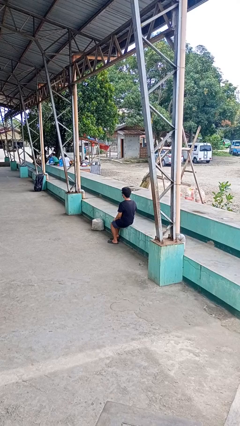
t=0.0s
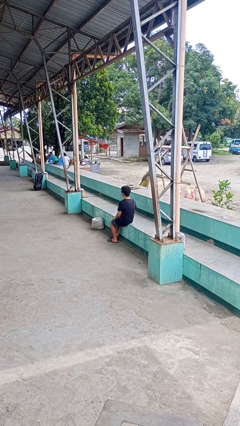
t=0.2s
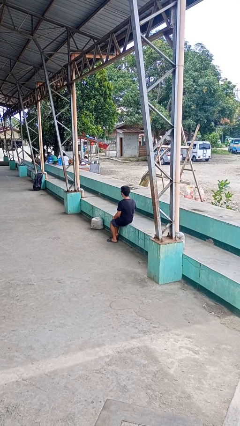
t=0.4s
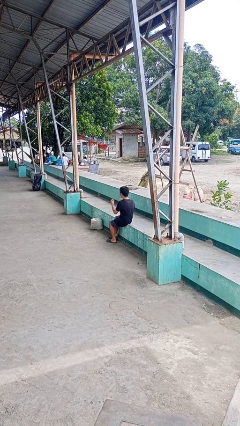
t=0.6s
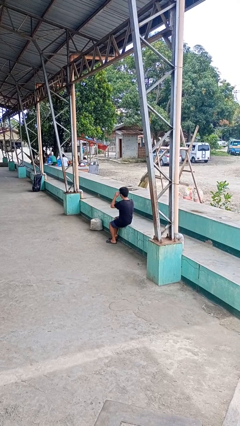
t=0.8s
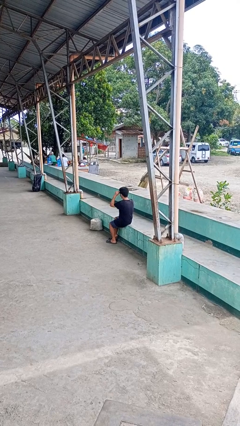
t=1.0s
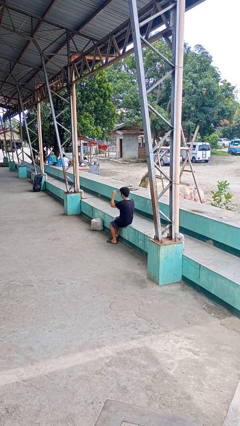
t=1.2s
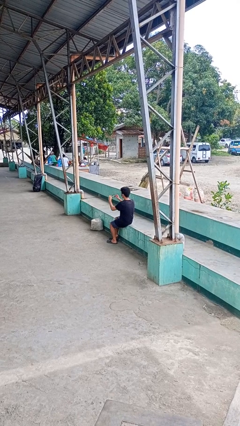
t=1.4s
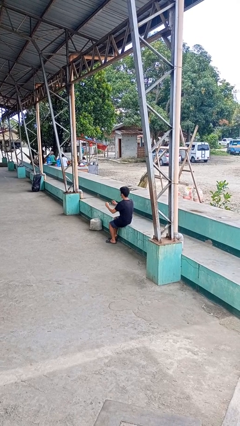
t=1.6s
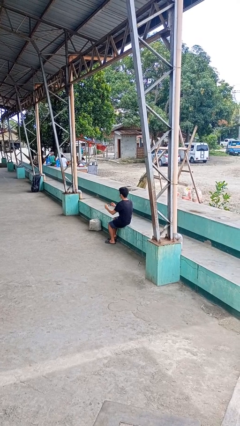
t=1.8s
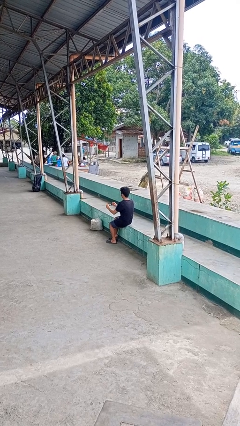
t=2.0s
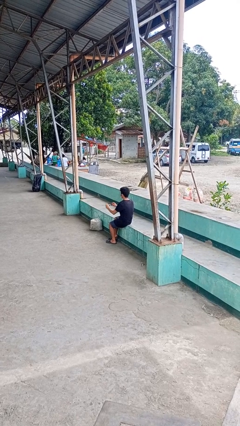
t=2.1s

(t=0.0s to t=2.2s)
person takes off sunglasses

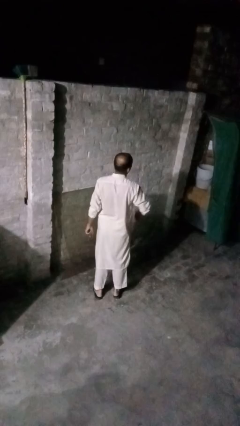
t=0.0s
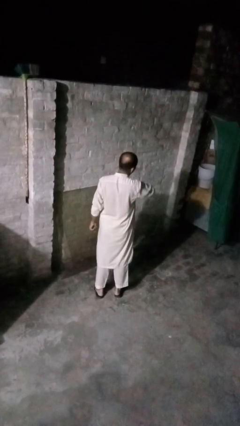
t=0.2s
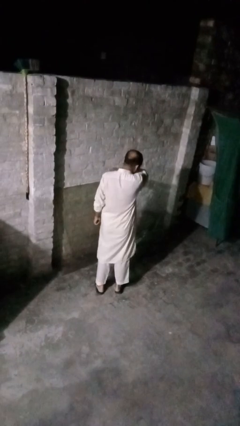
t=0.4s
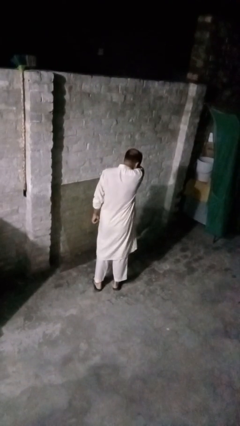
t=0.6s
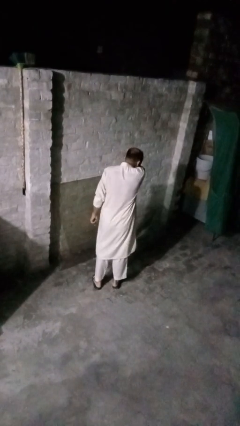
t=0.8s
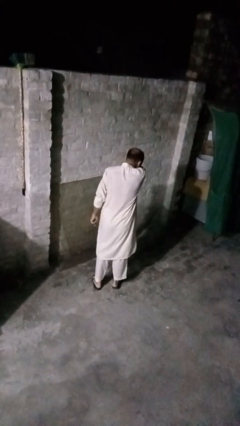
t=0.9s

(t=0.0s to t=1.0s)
person sneezes into arm

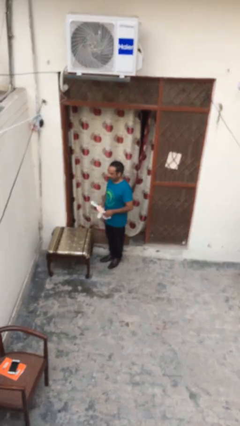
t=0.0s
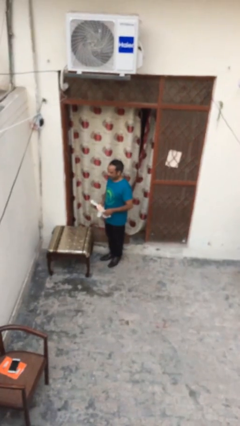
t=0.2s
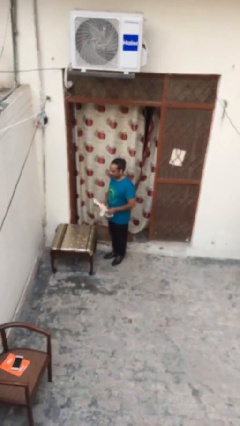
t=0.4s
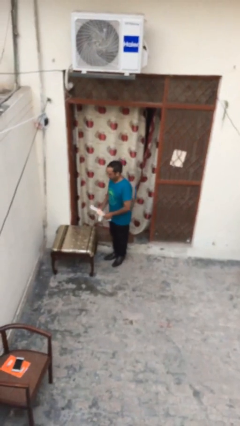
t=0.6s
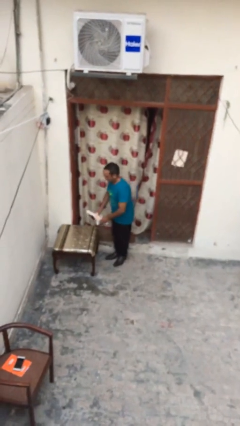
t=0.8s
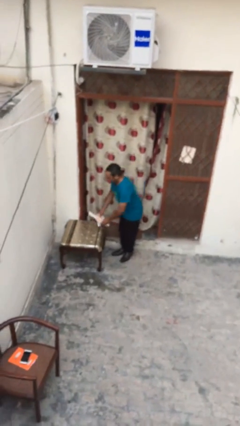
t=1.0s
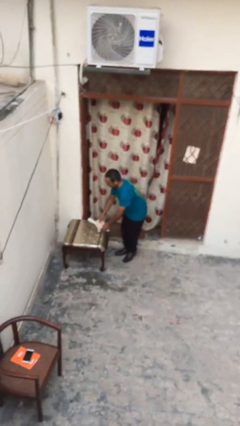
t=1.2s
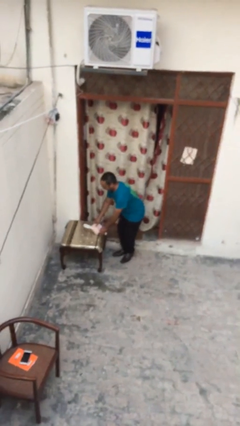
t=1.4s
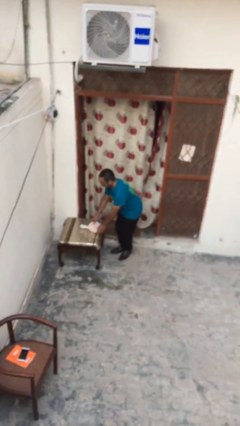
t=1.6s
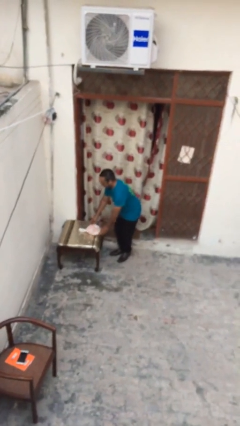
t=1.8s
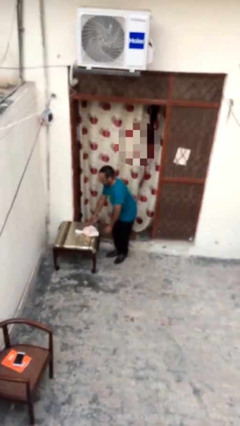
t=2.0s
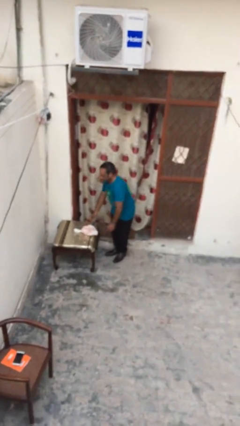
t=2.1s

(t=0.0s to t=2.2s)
person puts down object on table

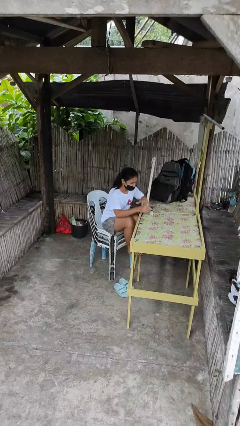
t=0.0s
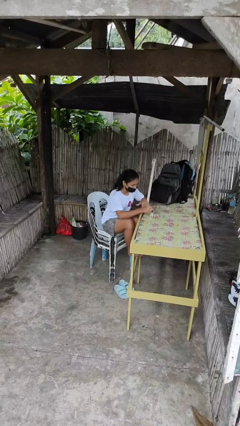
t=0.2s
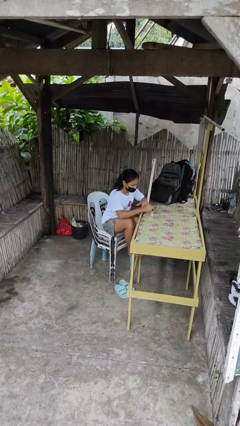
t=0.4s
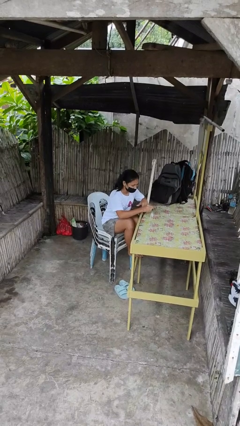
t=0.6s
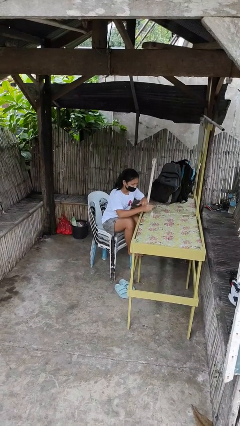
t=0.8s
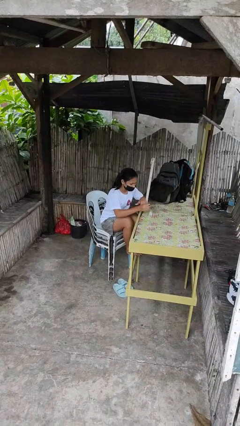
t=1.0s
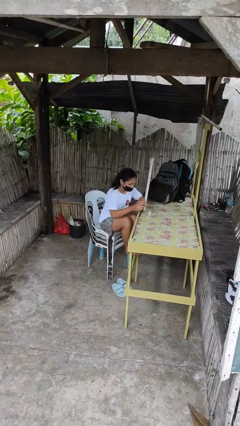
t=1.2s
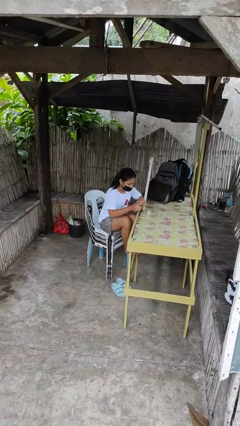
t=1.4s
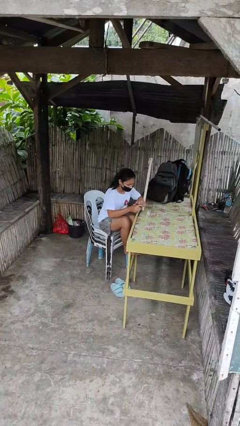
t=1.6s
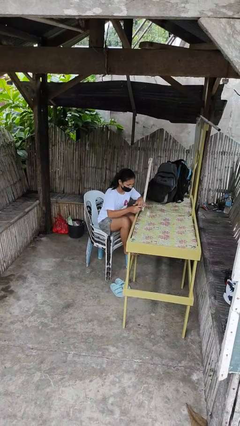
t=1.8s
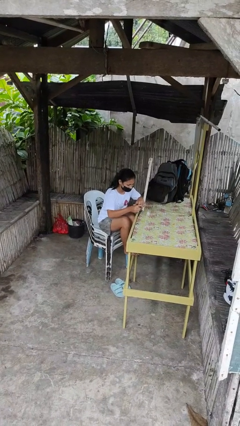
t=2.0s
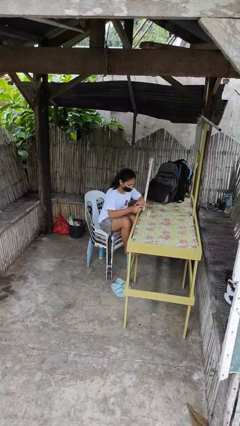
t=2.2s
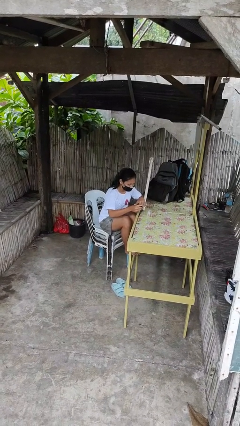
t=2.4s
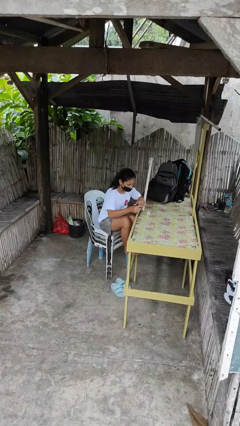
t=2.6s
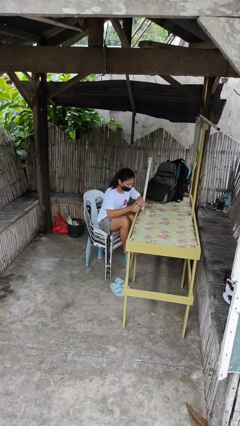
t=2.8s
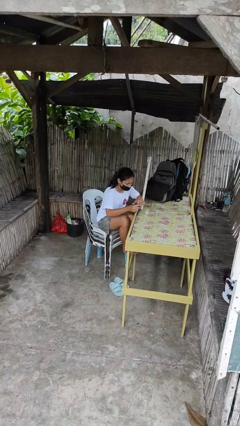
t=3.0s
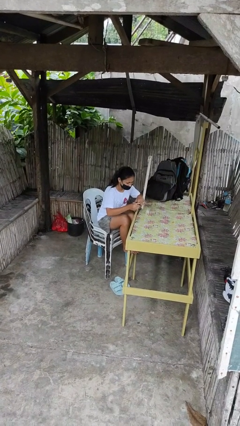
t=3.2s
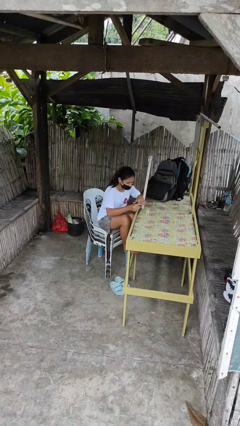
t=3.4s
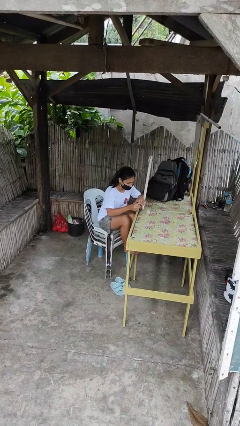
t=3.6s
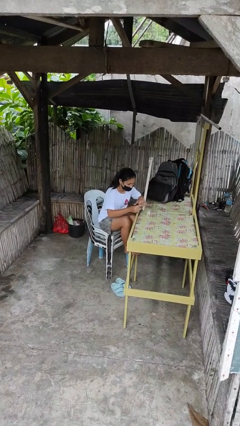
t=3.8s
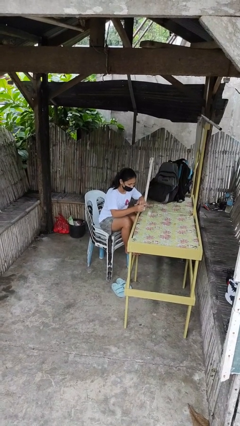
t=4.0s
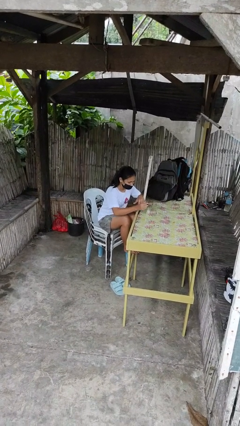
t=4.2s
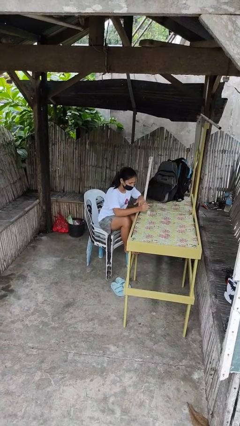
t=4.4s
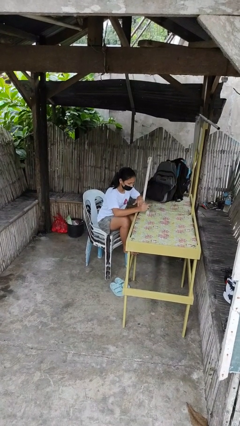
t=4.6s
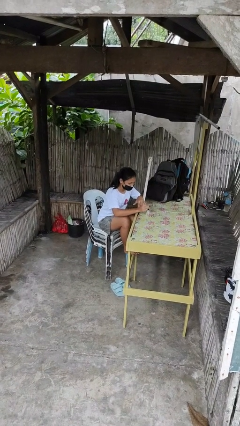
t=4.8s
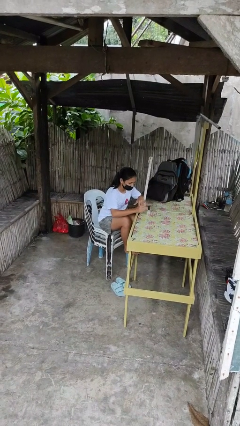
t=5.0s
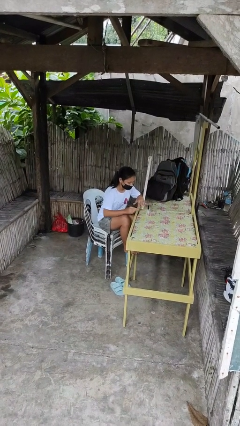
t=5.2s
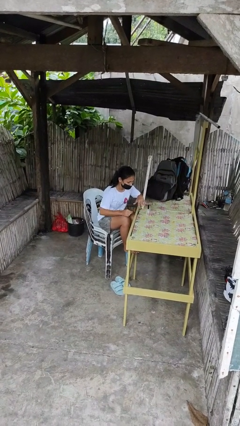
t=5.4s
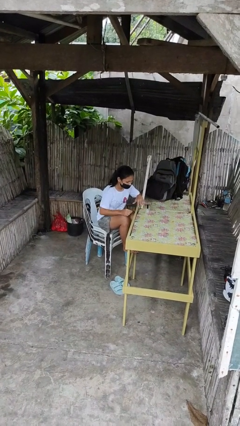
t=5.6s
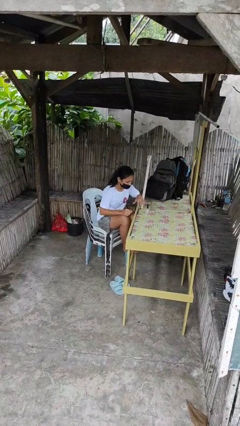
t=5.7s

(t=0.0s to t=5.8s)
person paints fingernails

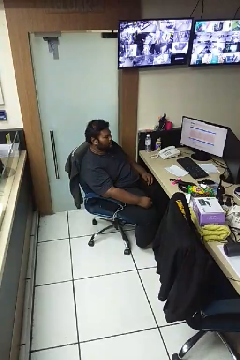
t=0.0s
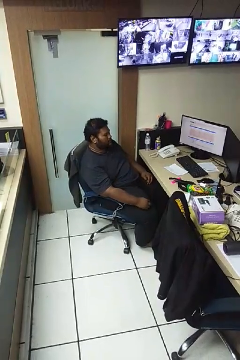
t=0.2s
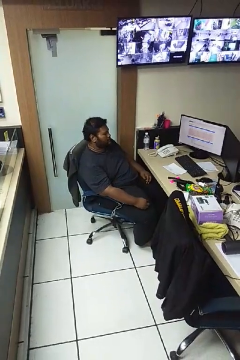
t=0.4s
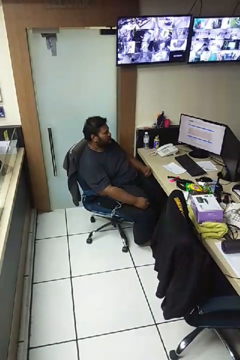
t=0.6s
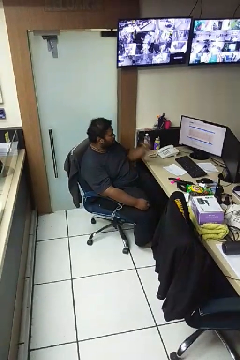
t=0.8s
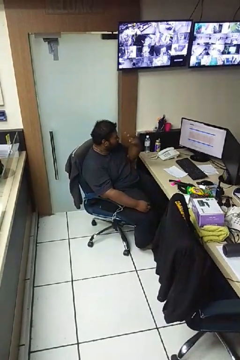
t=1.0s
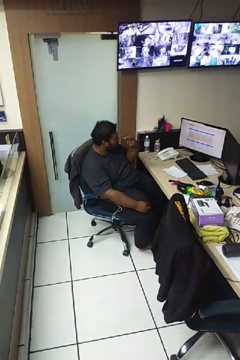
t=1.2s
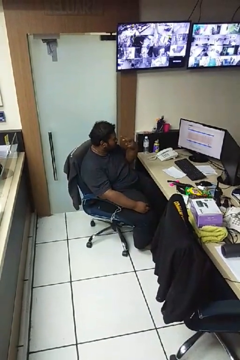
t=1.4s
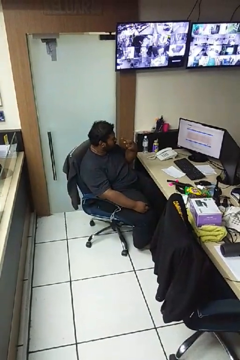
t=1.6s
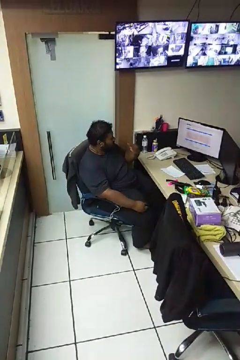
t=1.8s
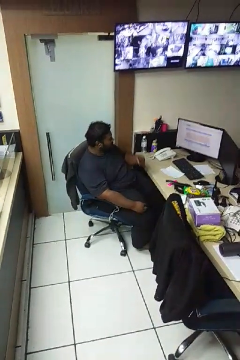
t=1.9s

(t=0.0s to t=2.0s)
person gestures watch closely

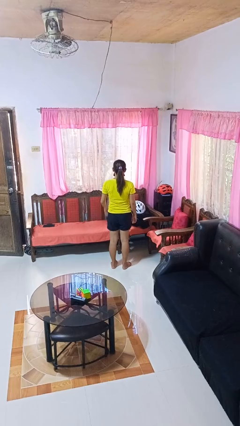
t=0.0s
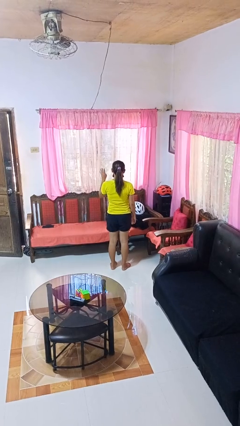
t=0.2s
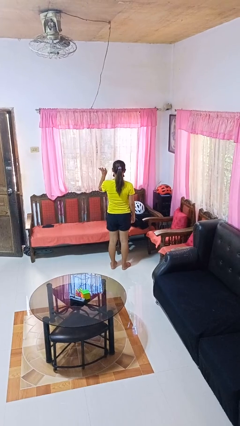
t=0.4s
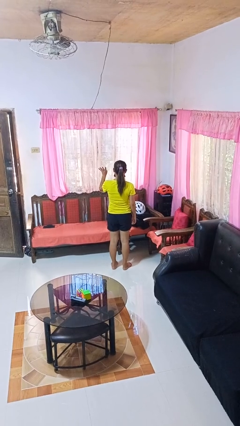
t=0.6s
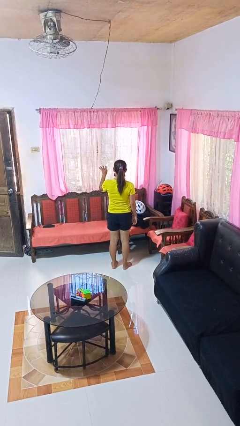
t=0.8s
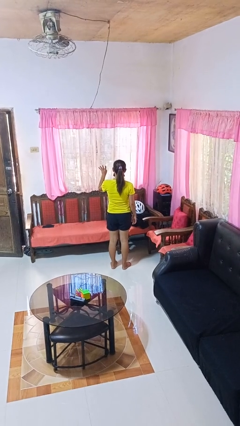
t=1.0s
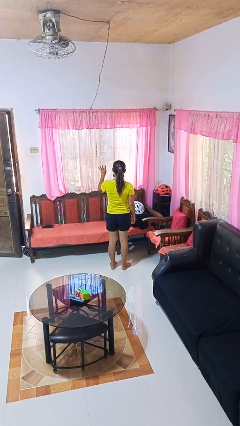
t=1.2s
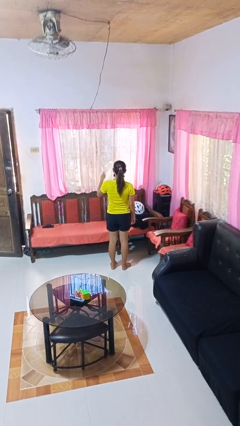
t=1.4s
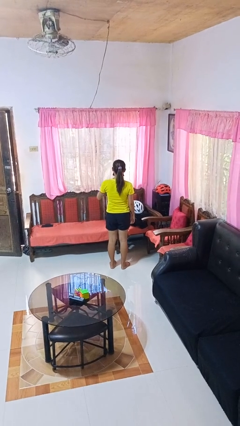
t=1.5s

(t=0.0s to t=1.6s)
person gestures number four

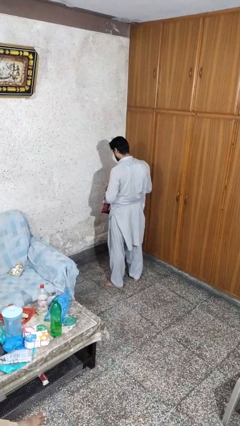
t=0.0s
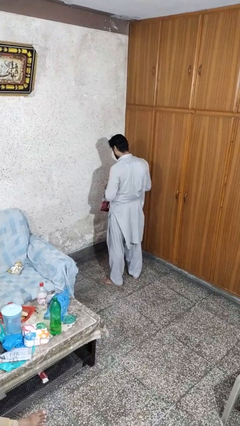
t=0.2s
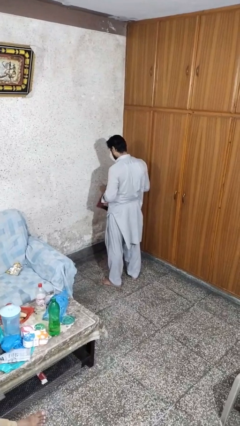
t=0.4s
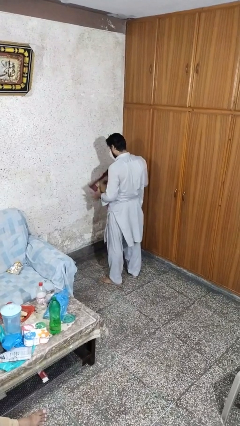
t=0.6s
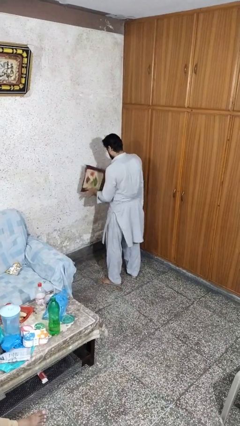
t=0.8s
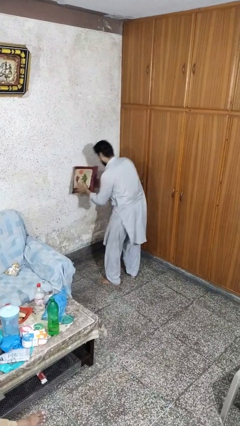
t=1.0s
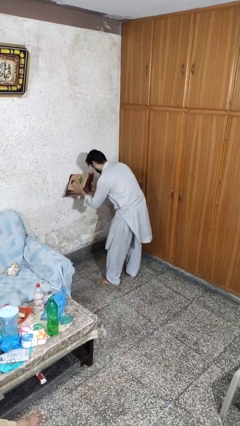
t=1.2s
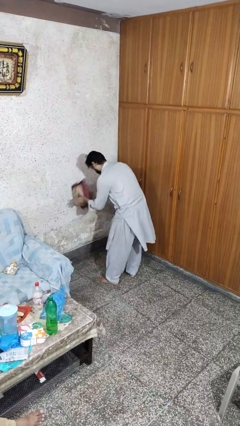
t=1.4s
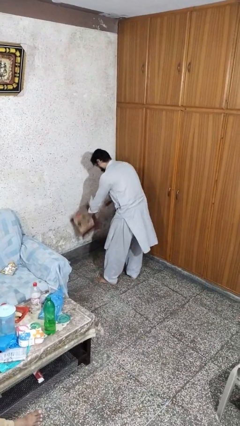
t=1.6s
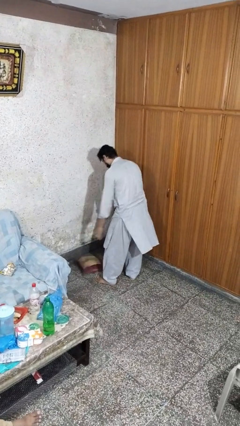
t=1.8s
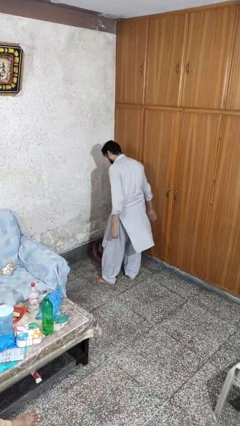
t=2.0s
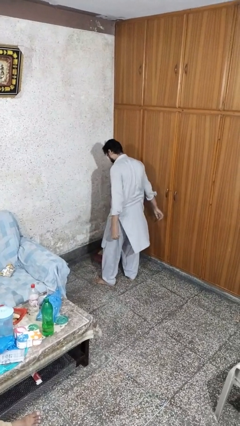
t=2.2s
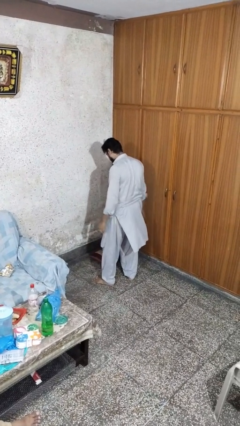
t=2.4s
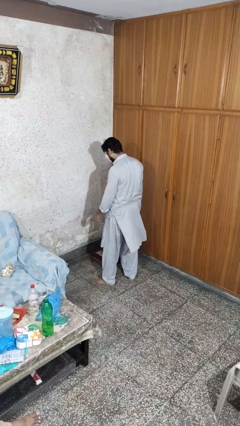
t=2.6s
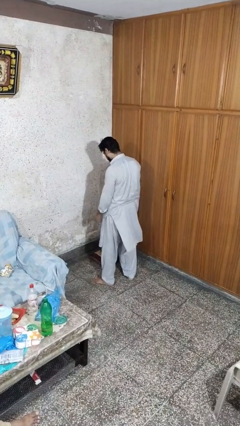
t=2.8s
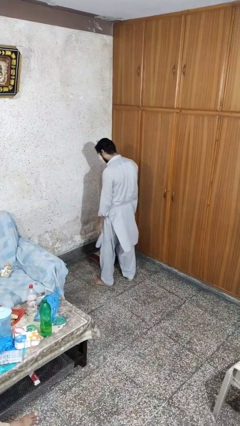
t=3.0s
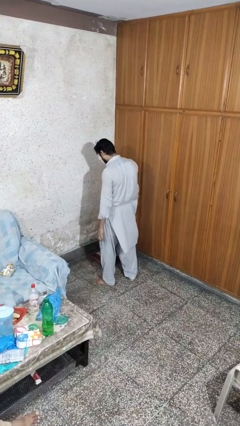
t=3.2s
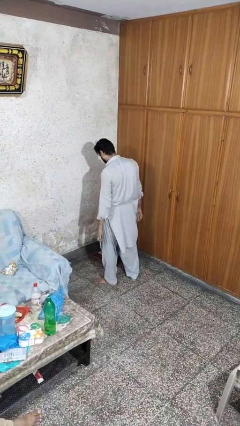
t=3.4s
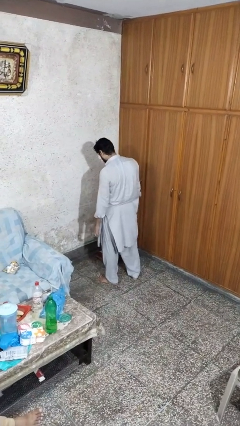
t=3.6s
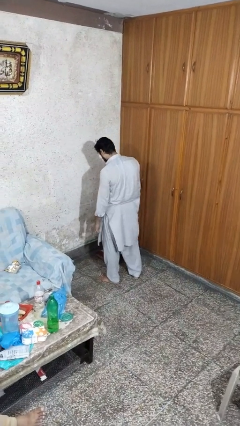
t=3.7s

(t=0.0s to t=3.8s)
person drops object
